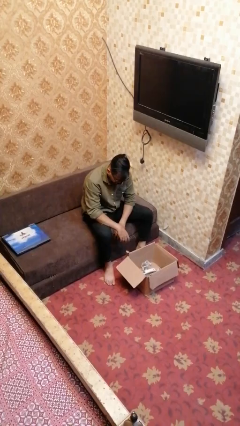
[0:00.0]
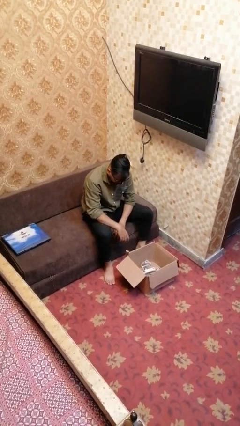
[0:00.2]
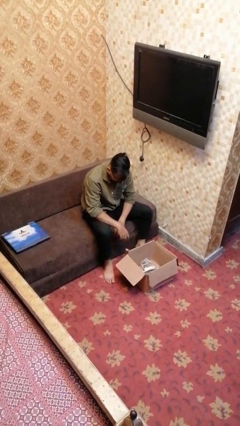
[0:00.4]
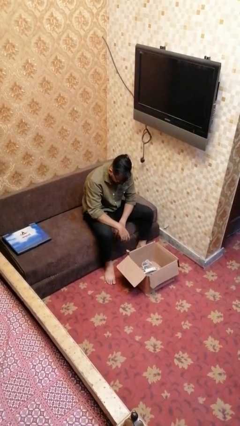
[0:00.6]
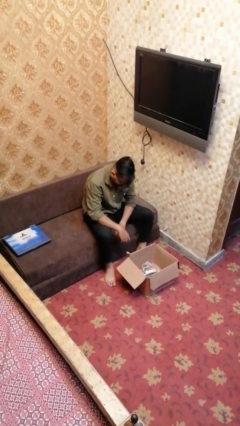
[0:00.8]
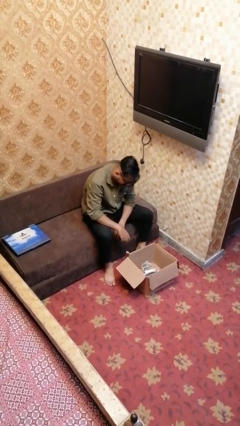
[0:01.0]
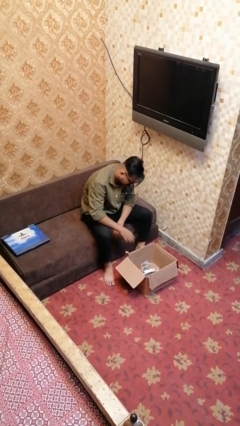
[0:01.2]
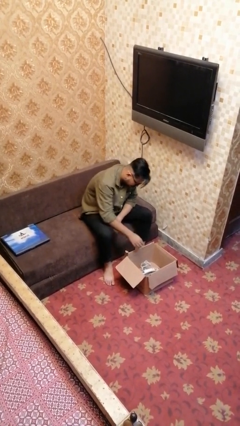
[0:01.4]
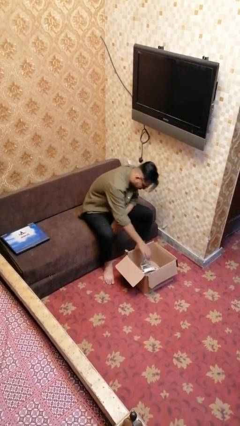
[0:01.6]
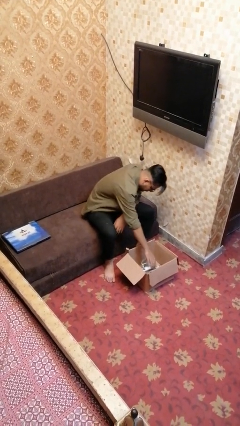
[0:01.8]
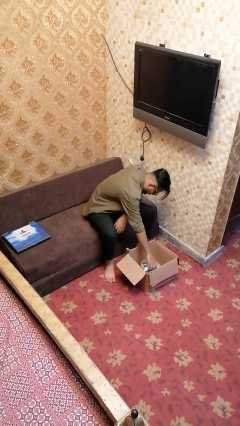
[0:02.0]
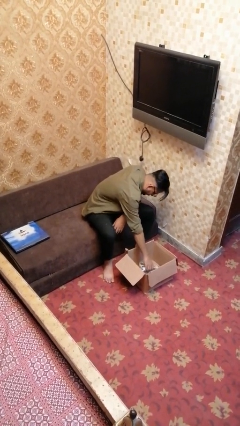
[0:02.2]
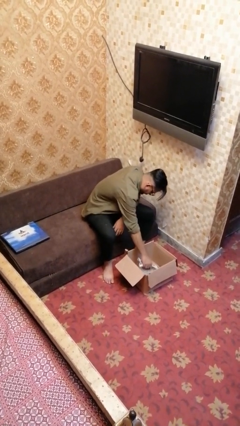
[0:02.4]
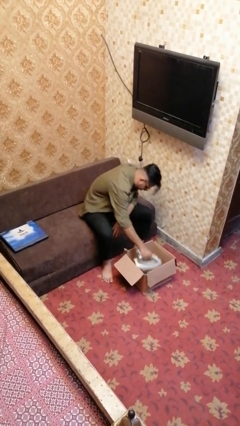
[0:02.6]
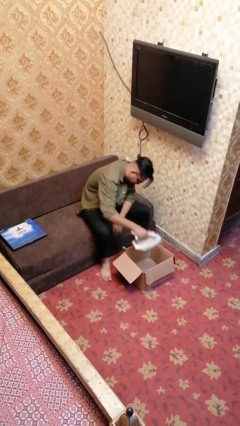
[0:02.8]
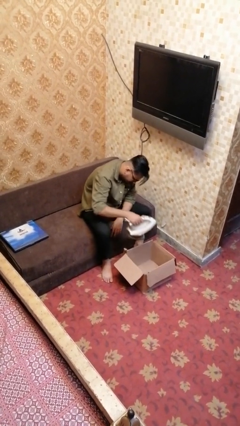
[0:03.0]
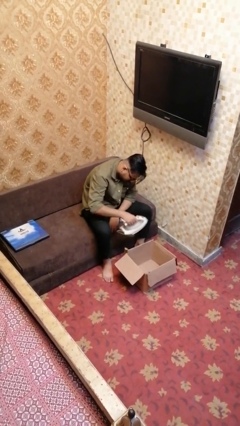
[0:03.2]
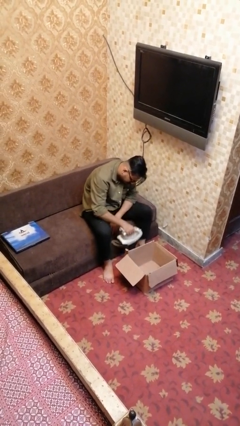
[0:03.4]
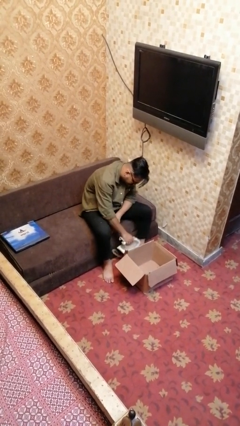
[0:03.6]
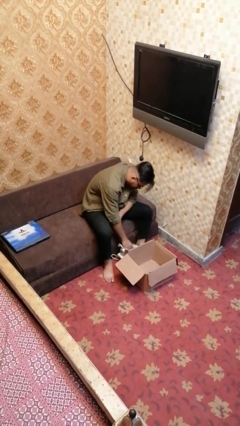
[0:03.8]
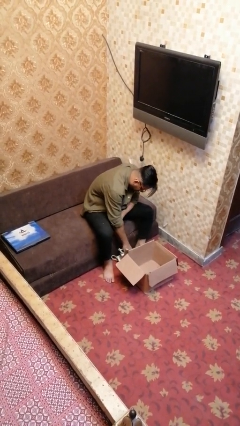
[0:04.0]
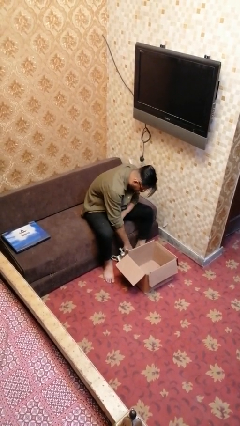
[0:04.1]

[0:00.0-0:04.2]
person takes object from box

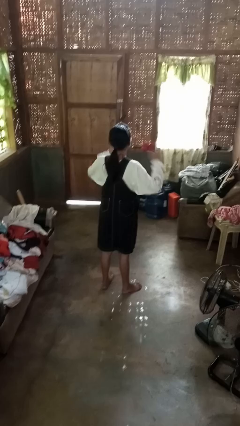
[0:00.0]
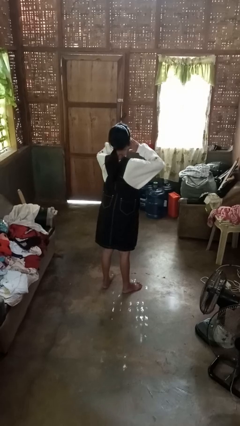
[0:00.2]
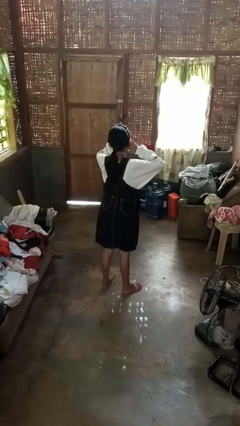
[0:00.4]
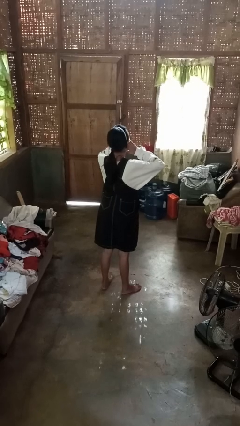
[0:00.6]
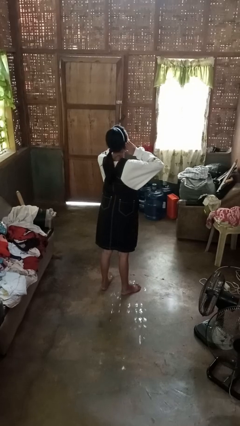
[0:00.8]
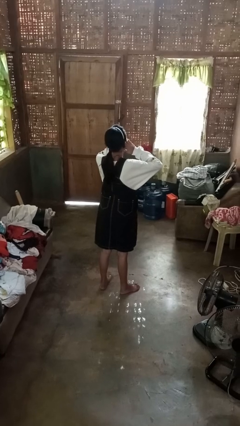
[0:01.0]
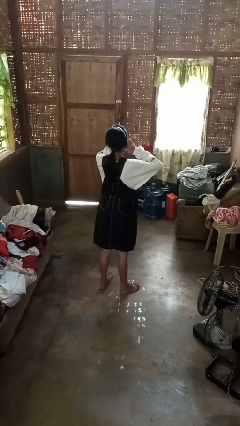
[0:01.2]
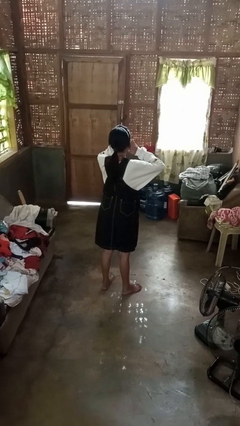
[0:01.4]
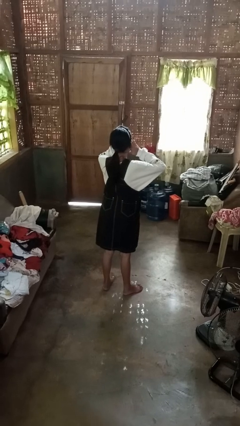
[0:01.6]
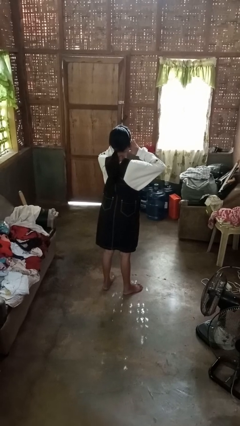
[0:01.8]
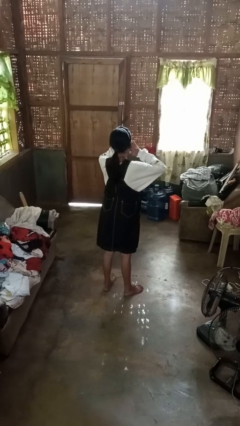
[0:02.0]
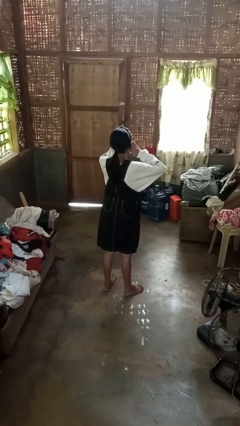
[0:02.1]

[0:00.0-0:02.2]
person puts fingers in ear

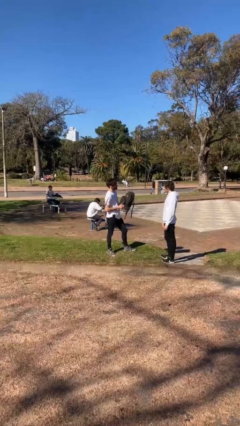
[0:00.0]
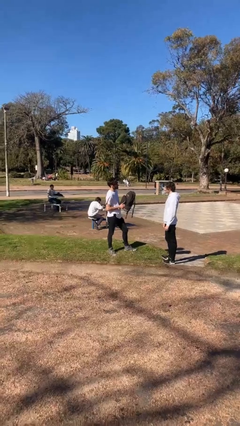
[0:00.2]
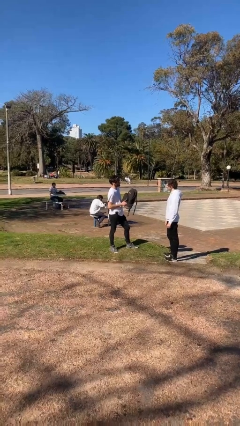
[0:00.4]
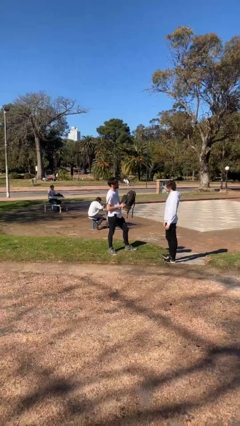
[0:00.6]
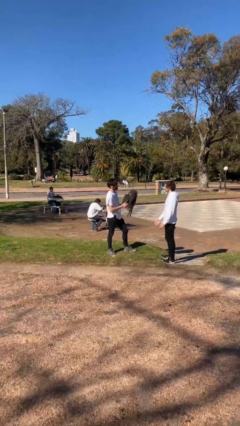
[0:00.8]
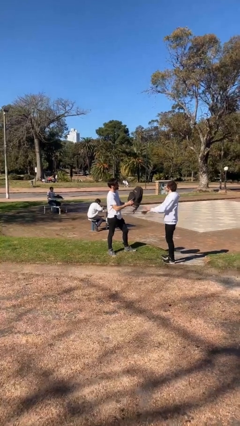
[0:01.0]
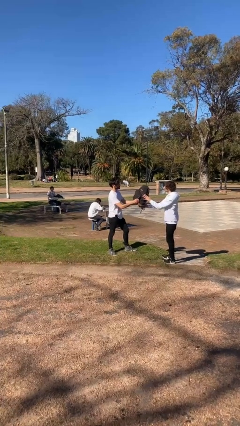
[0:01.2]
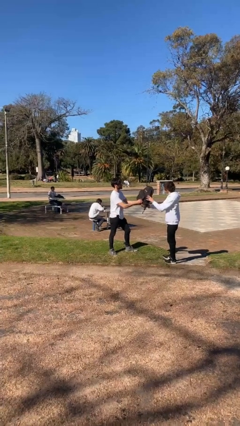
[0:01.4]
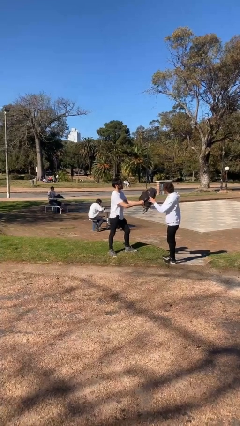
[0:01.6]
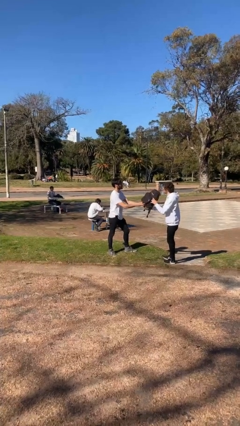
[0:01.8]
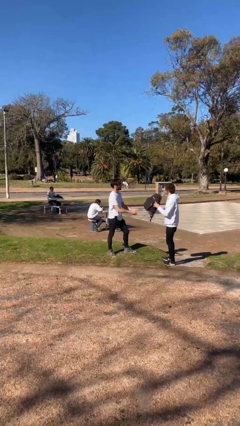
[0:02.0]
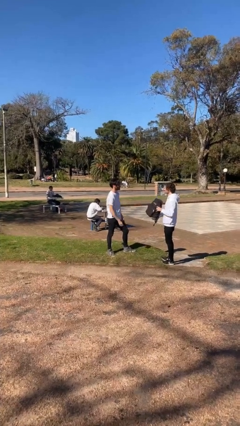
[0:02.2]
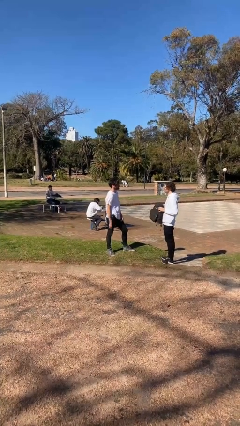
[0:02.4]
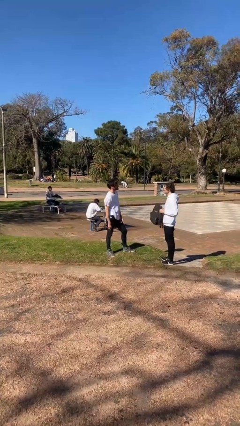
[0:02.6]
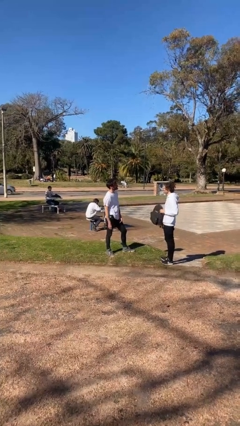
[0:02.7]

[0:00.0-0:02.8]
person transfers object to person

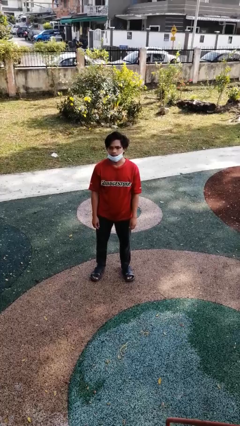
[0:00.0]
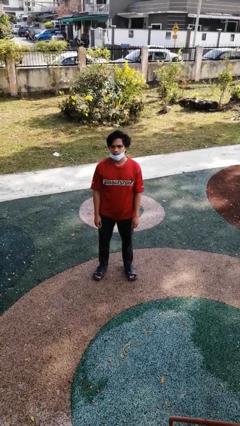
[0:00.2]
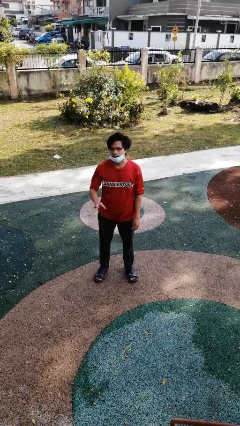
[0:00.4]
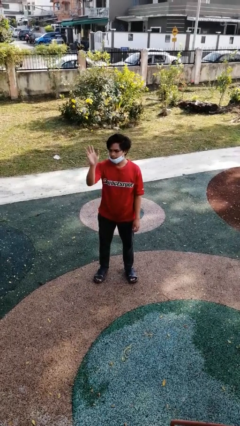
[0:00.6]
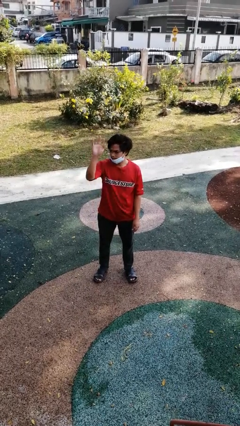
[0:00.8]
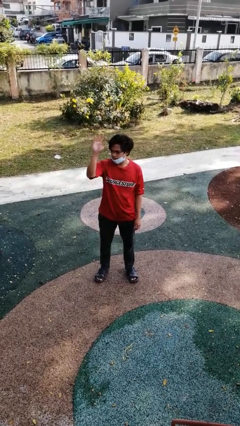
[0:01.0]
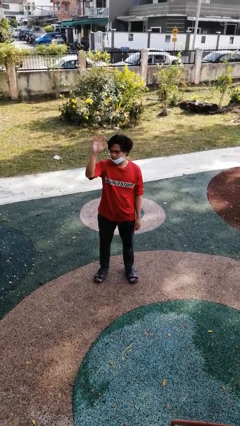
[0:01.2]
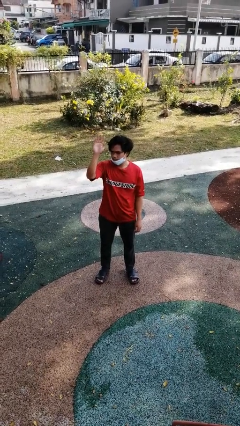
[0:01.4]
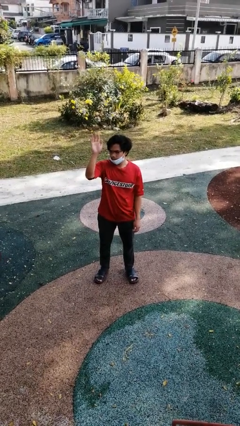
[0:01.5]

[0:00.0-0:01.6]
person waves at person

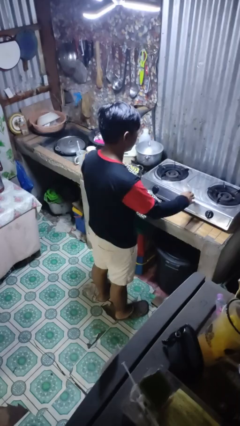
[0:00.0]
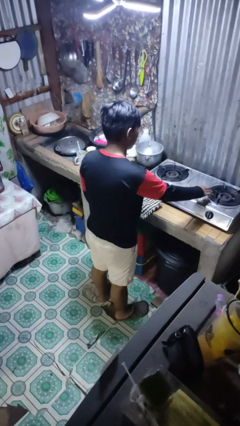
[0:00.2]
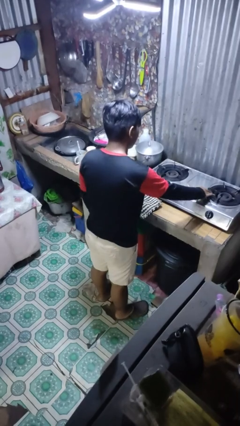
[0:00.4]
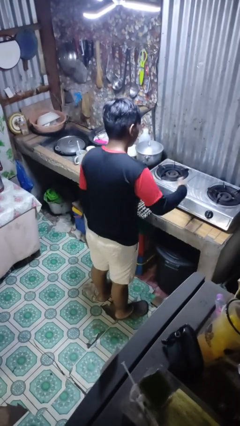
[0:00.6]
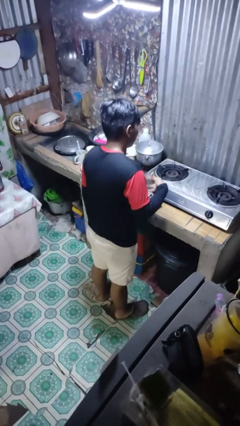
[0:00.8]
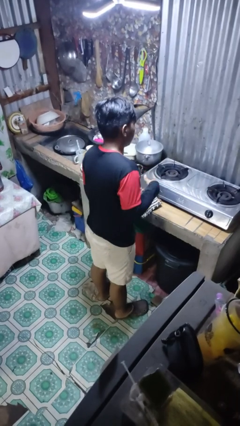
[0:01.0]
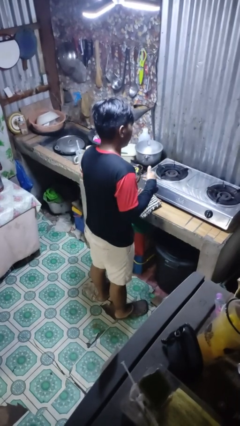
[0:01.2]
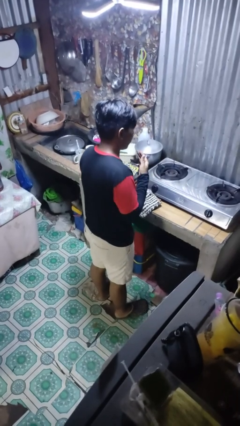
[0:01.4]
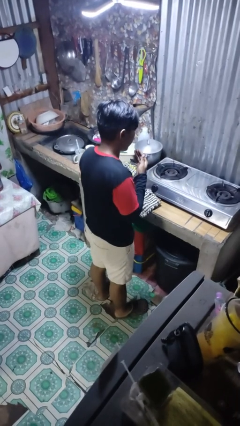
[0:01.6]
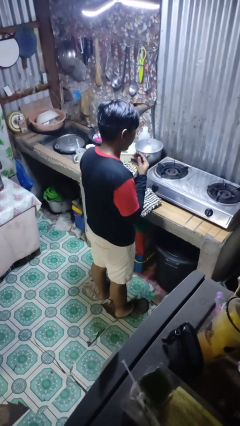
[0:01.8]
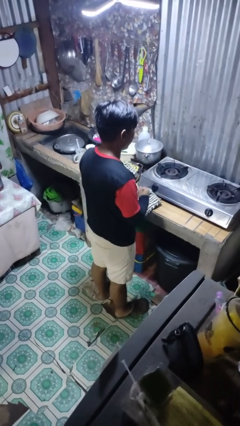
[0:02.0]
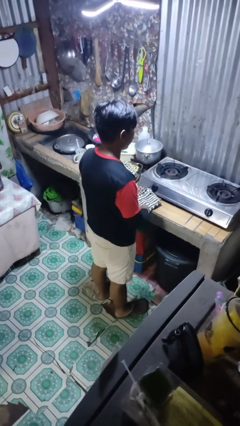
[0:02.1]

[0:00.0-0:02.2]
person burns hand

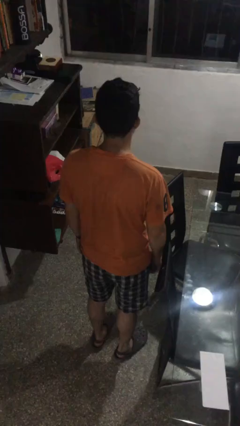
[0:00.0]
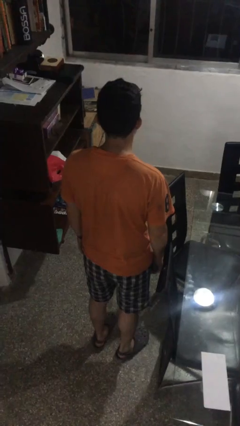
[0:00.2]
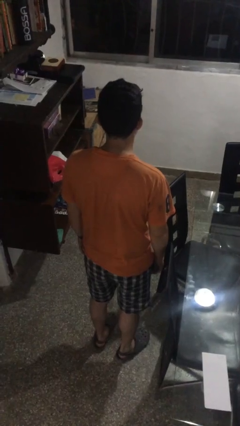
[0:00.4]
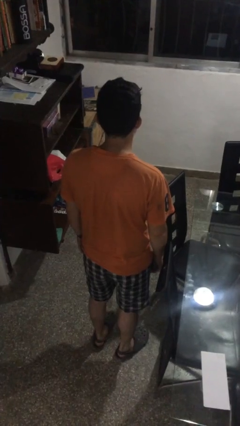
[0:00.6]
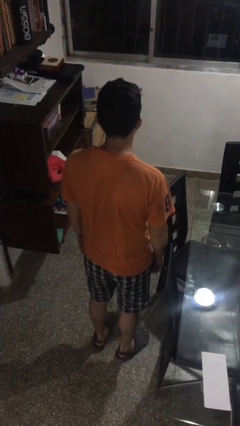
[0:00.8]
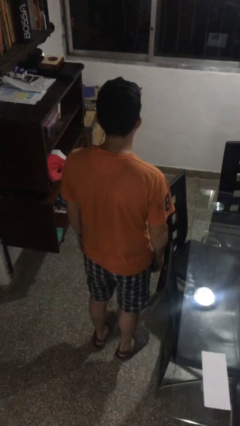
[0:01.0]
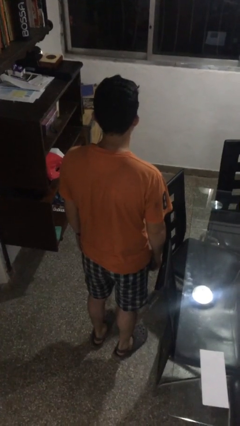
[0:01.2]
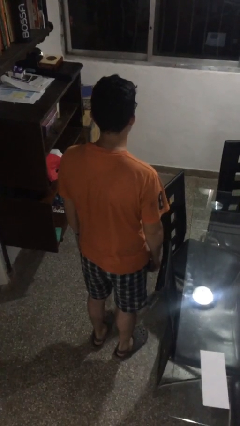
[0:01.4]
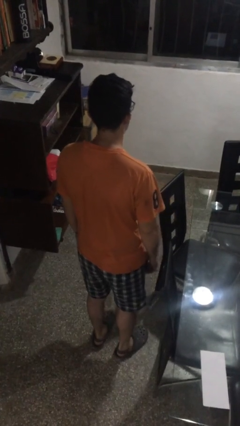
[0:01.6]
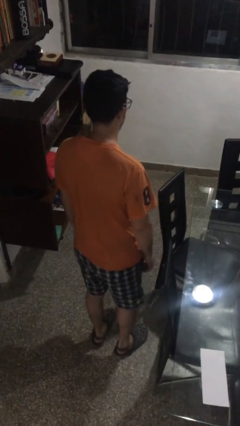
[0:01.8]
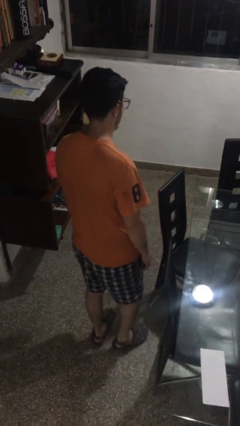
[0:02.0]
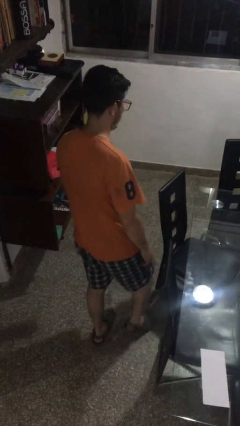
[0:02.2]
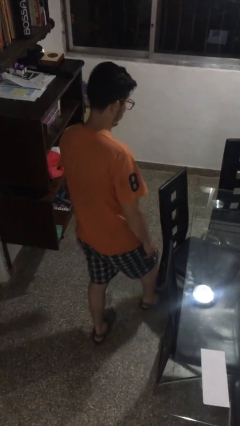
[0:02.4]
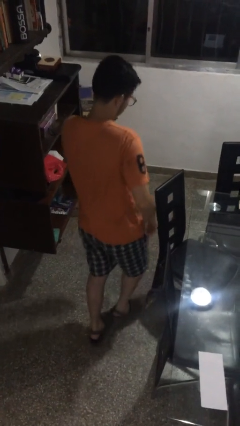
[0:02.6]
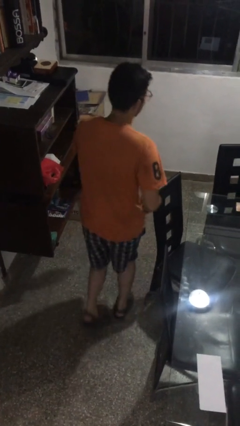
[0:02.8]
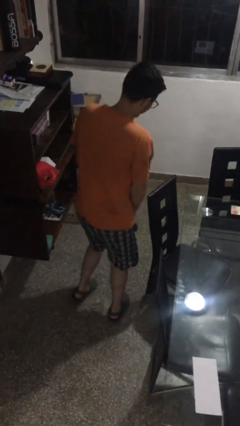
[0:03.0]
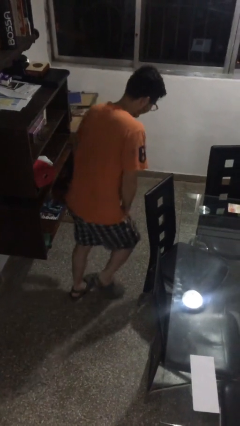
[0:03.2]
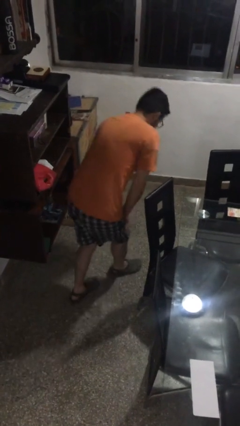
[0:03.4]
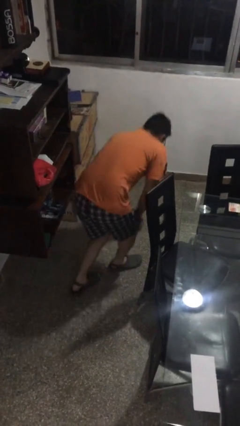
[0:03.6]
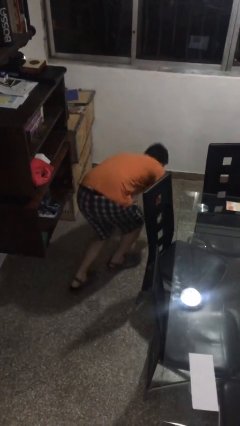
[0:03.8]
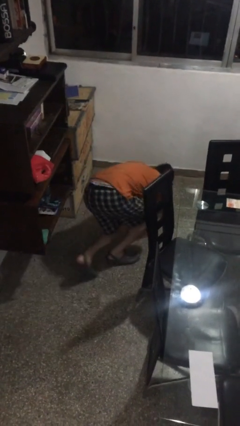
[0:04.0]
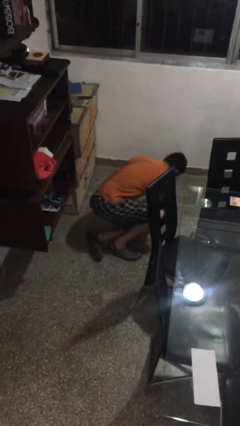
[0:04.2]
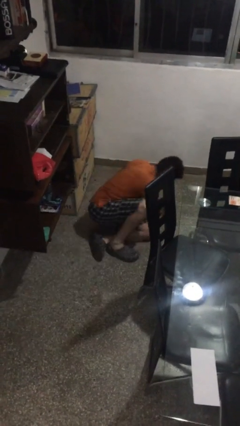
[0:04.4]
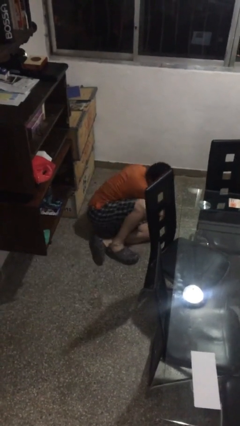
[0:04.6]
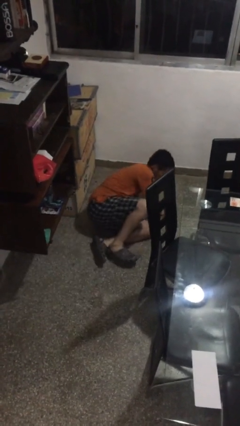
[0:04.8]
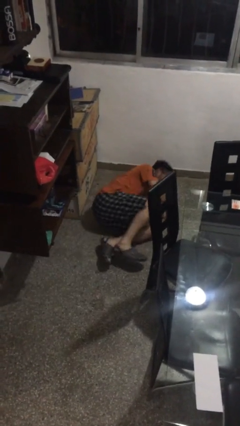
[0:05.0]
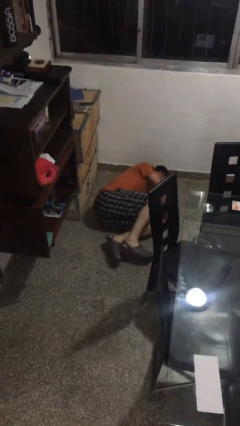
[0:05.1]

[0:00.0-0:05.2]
person trips on object on floor
